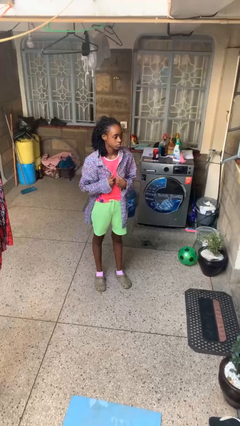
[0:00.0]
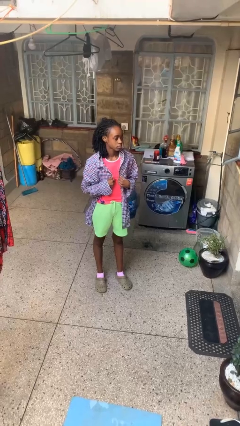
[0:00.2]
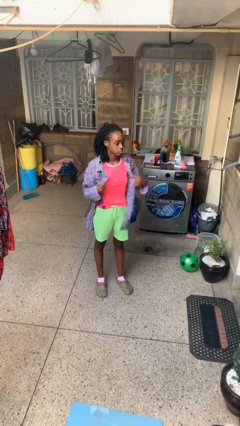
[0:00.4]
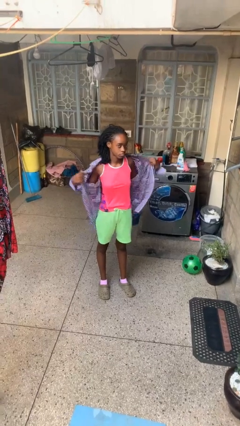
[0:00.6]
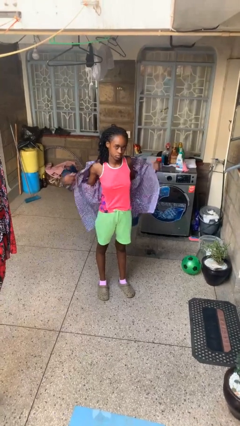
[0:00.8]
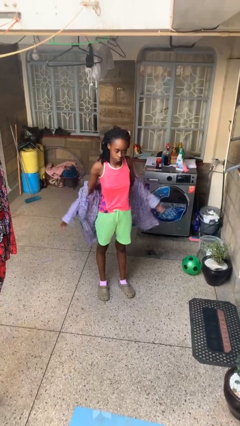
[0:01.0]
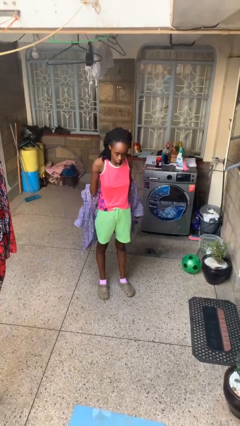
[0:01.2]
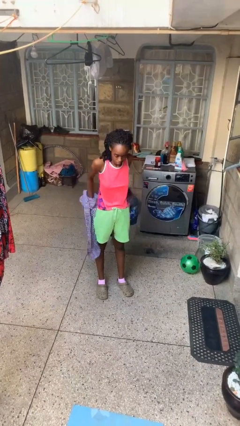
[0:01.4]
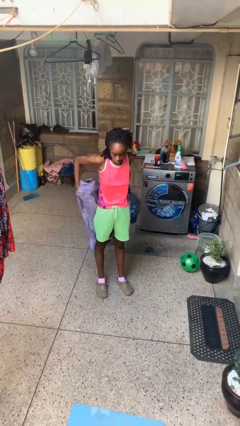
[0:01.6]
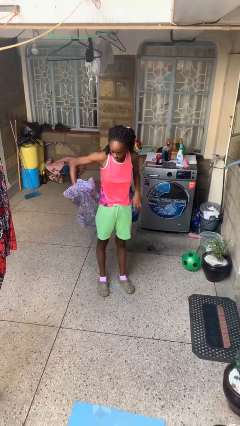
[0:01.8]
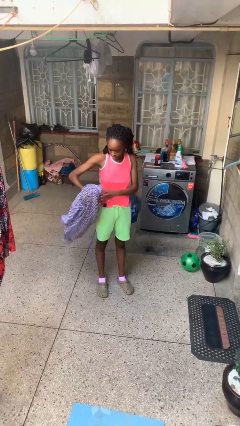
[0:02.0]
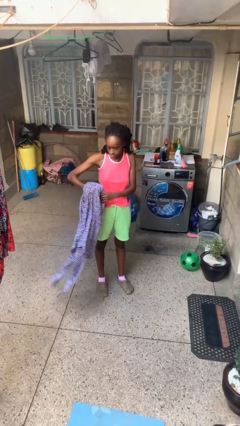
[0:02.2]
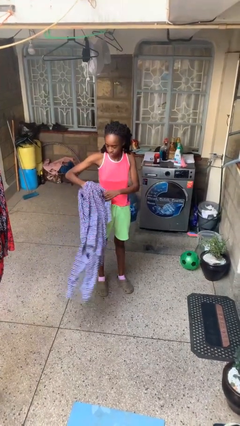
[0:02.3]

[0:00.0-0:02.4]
person takes off shirt

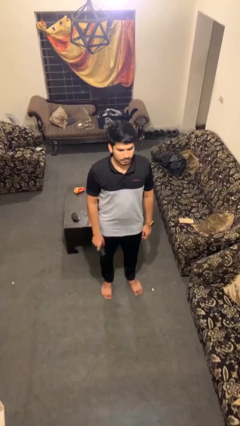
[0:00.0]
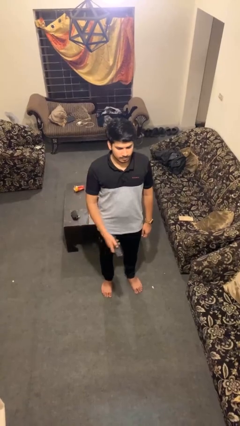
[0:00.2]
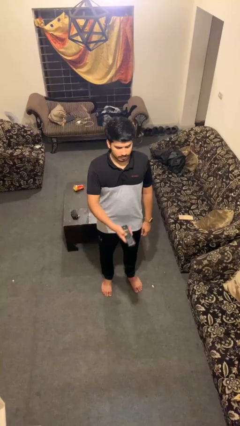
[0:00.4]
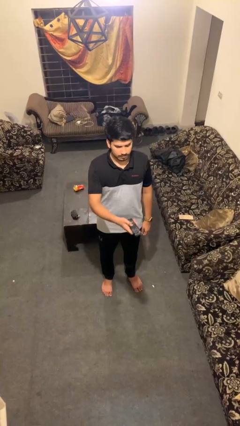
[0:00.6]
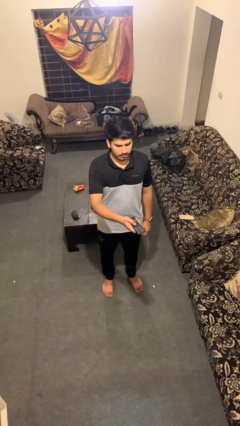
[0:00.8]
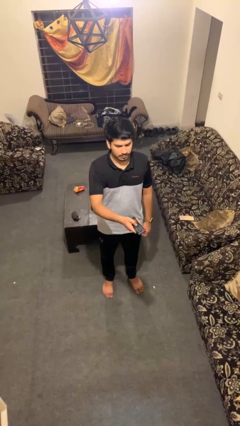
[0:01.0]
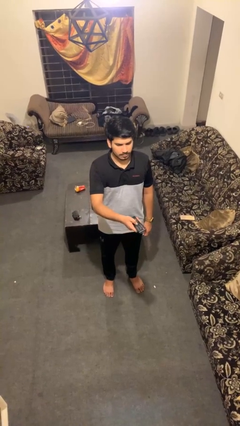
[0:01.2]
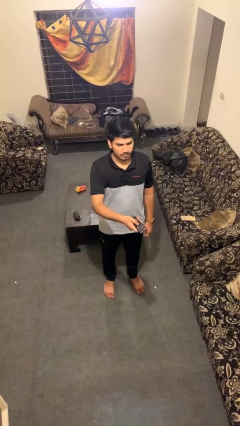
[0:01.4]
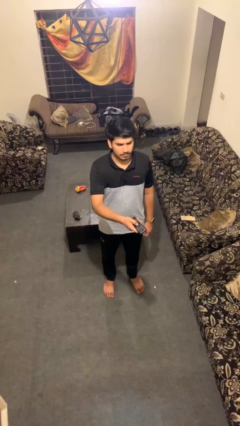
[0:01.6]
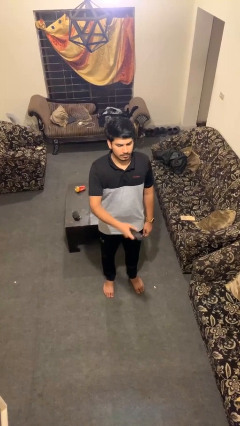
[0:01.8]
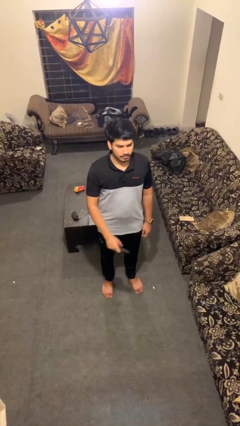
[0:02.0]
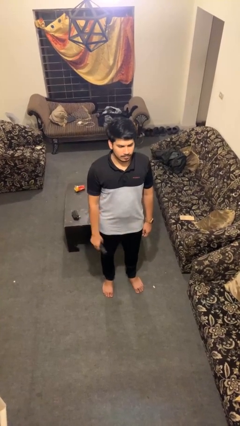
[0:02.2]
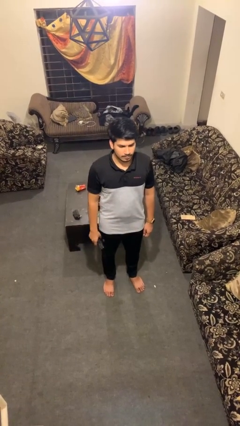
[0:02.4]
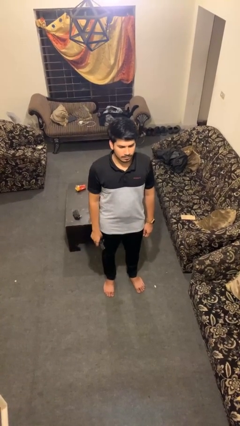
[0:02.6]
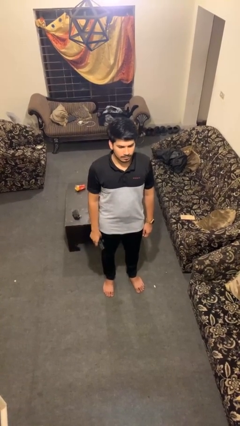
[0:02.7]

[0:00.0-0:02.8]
person uses television remote

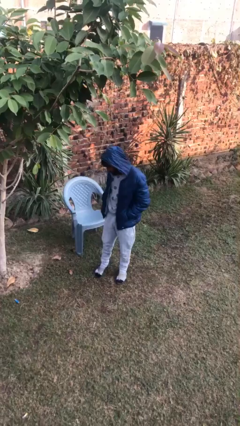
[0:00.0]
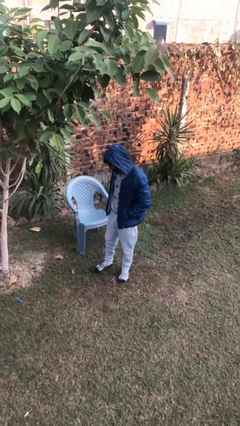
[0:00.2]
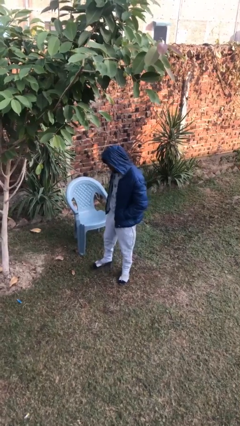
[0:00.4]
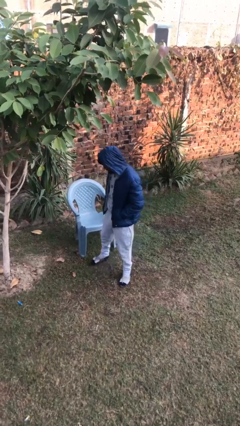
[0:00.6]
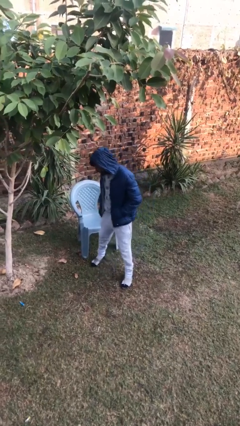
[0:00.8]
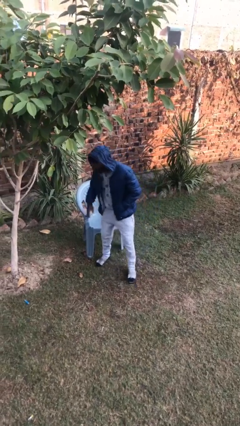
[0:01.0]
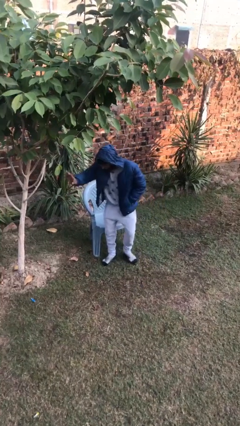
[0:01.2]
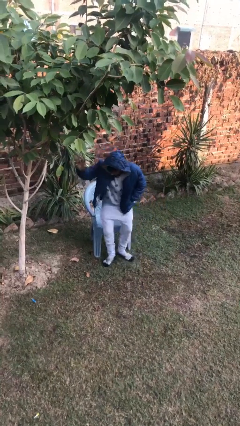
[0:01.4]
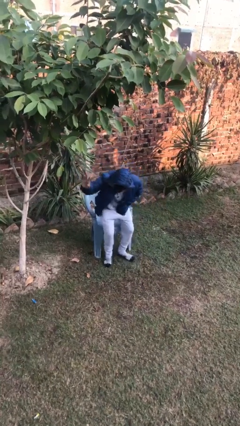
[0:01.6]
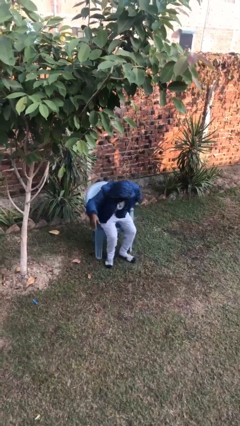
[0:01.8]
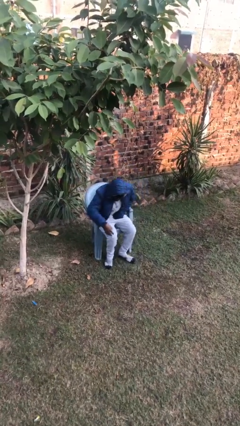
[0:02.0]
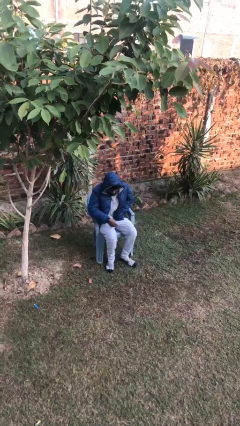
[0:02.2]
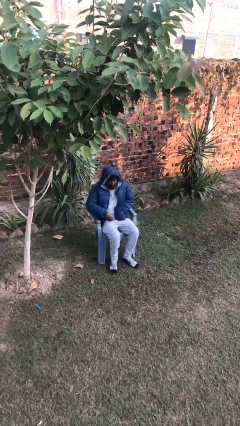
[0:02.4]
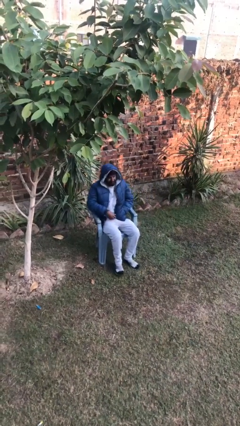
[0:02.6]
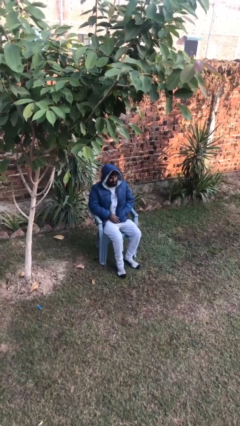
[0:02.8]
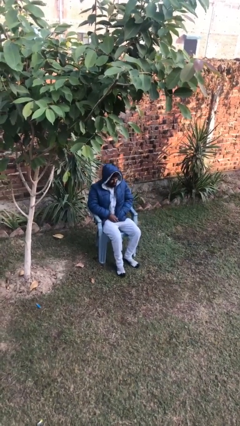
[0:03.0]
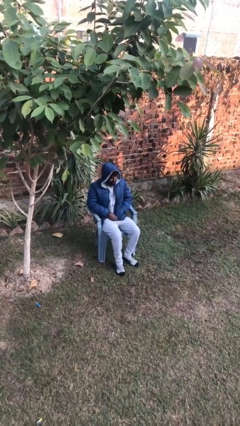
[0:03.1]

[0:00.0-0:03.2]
person sits down

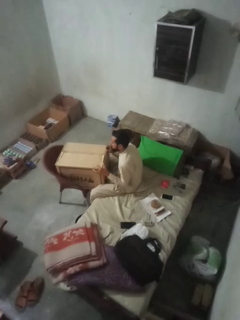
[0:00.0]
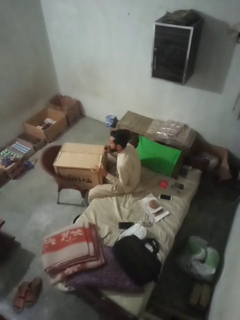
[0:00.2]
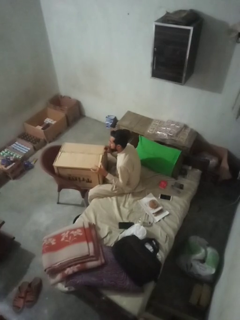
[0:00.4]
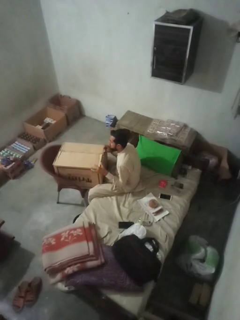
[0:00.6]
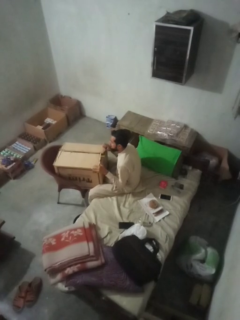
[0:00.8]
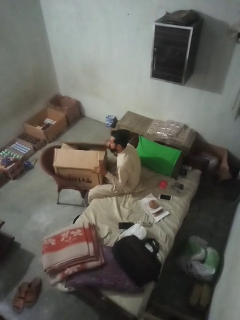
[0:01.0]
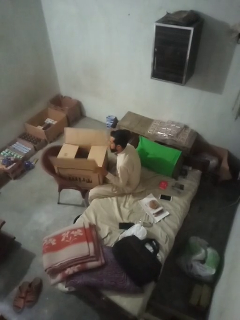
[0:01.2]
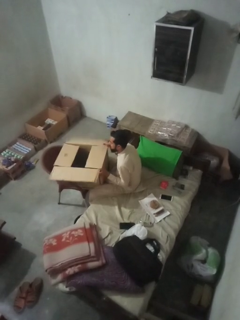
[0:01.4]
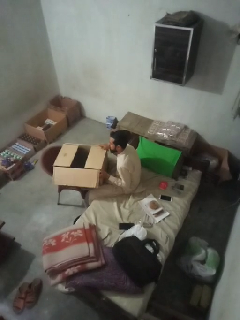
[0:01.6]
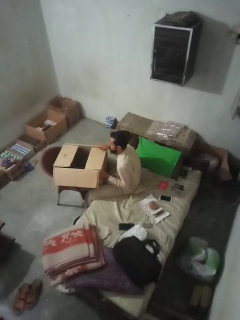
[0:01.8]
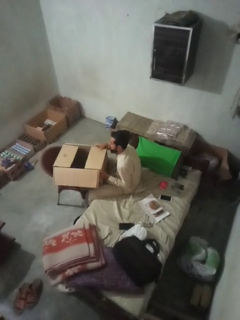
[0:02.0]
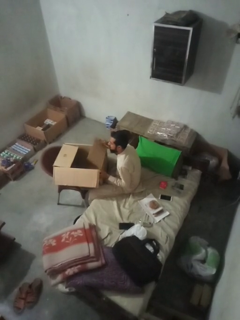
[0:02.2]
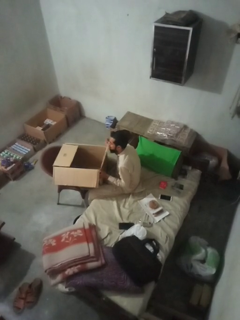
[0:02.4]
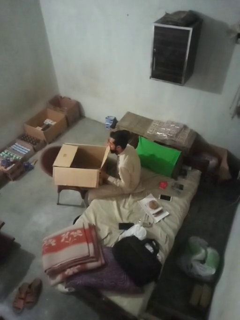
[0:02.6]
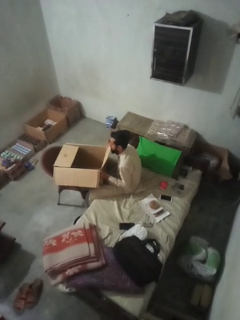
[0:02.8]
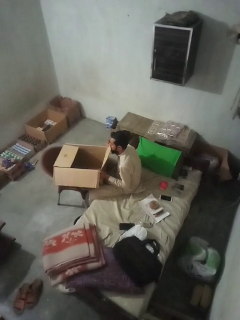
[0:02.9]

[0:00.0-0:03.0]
person opens box

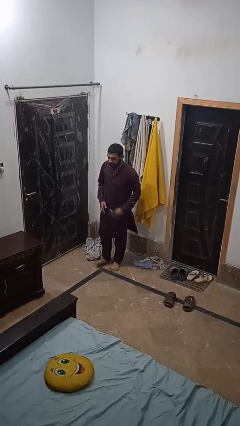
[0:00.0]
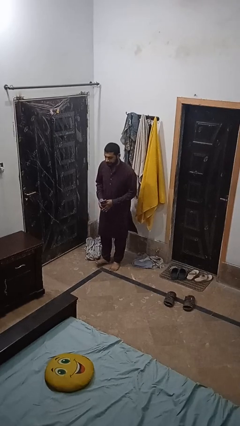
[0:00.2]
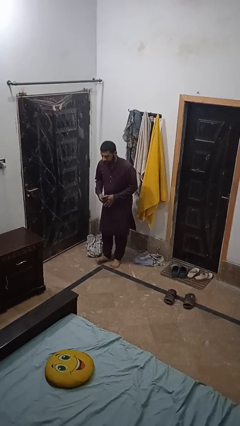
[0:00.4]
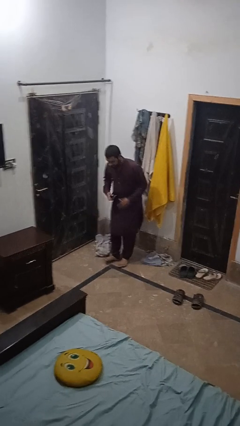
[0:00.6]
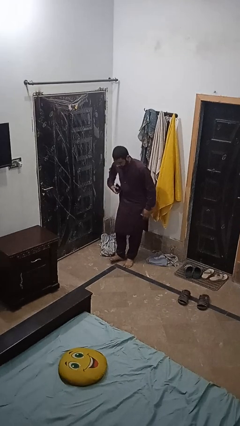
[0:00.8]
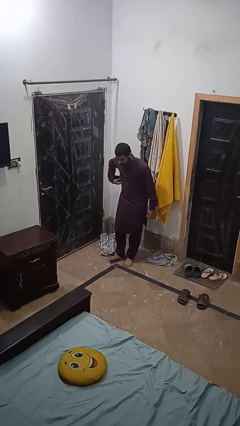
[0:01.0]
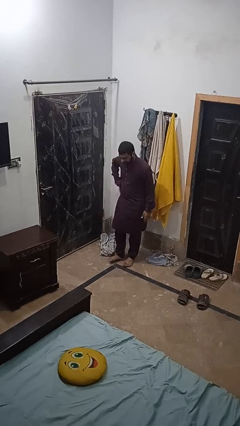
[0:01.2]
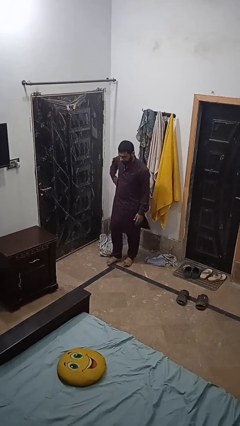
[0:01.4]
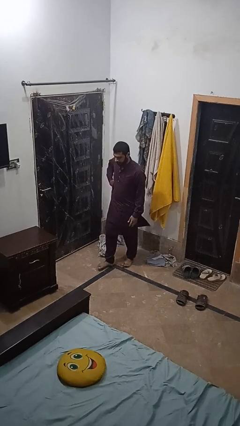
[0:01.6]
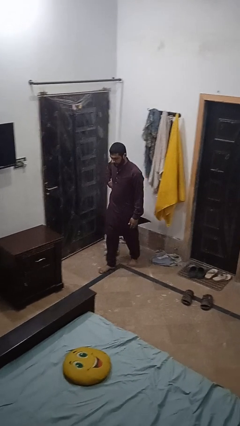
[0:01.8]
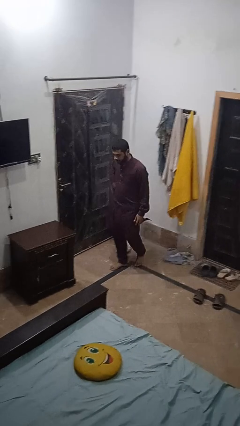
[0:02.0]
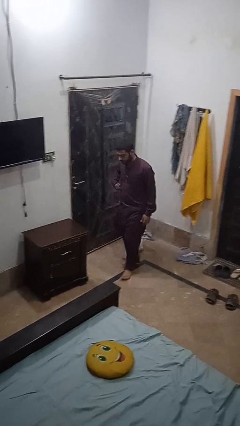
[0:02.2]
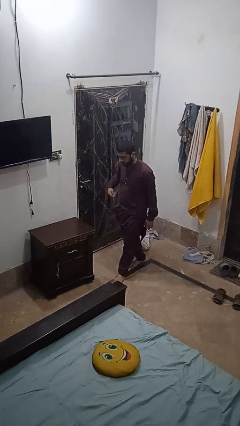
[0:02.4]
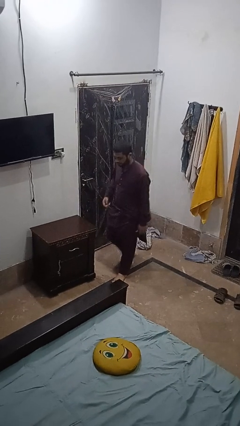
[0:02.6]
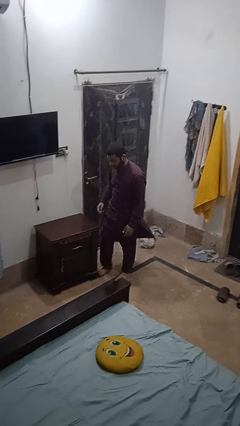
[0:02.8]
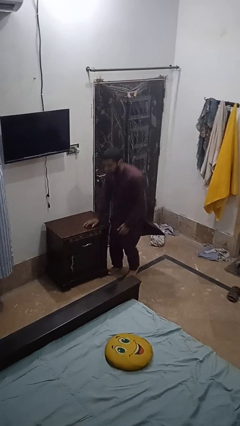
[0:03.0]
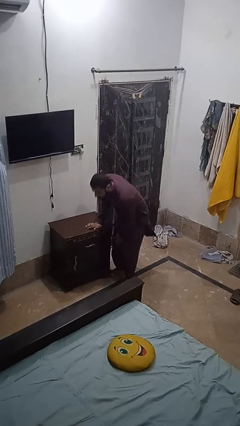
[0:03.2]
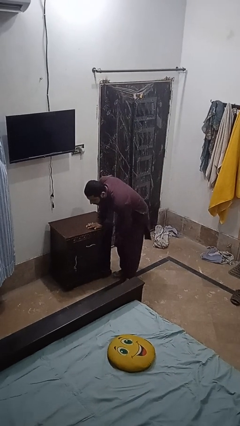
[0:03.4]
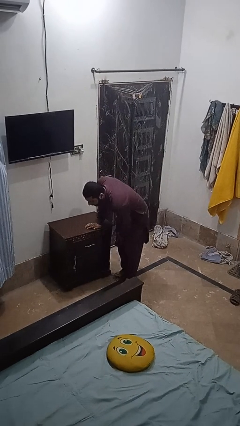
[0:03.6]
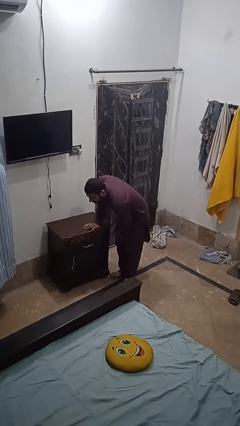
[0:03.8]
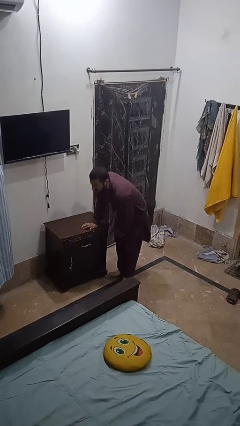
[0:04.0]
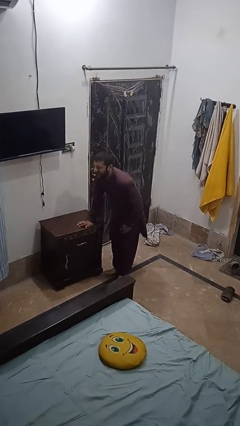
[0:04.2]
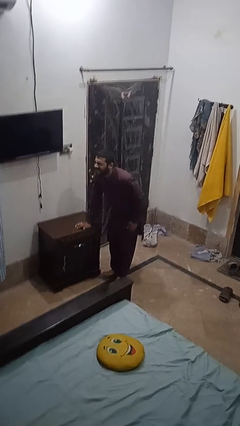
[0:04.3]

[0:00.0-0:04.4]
person stubs toe

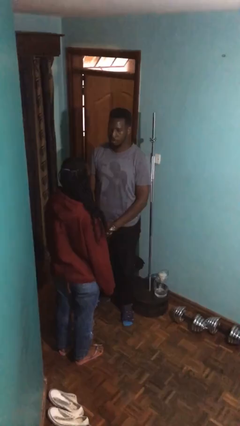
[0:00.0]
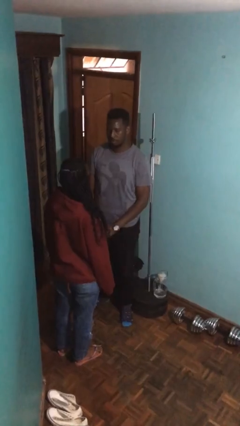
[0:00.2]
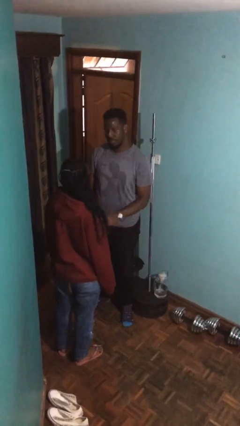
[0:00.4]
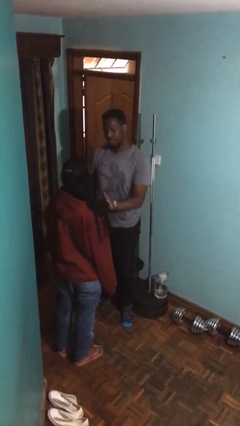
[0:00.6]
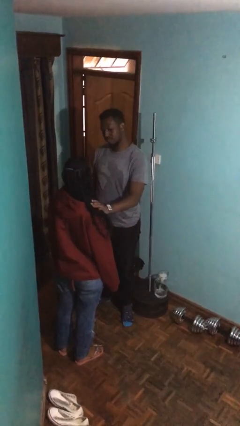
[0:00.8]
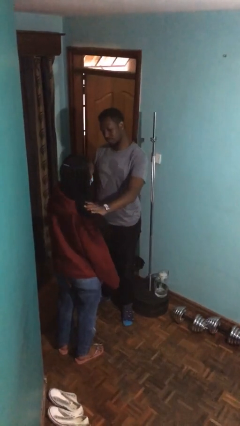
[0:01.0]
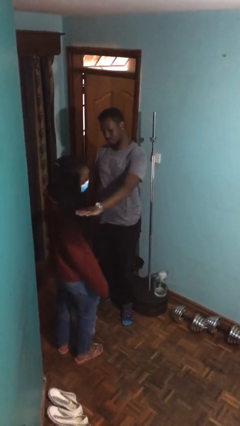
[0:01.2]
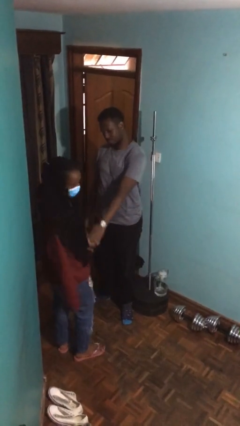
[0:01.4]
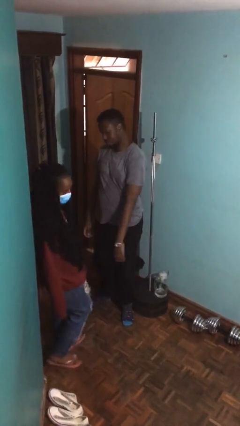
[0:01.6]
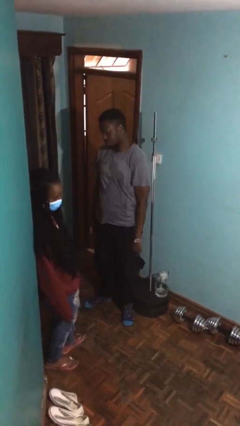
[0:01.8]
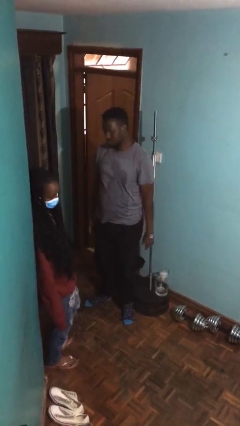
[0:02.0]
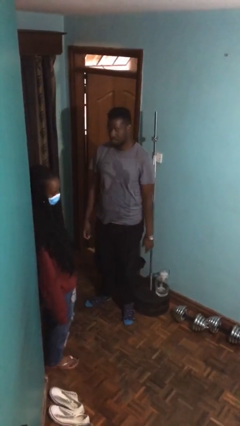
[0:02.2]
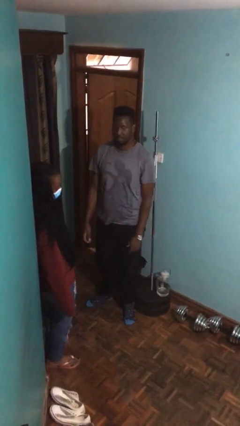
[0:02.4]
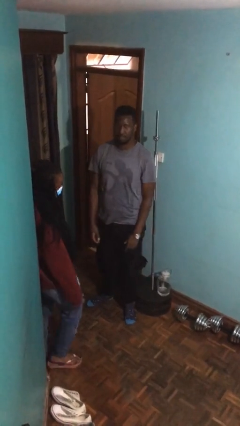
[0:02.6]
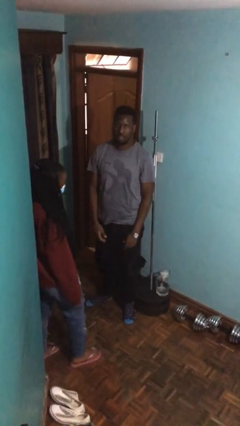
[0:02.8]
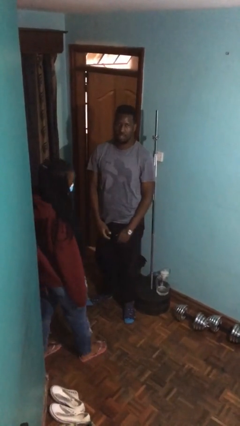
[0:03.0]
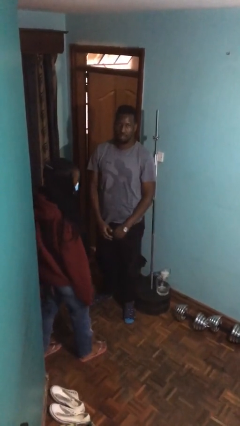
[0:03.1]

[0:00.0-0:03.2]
person shoves person
